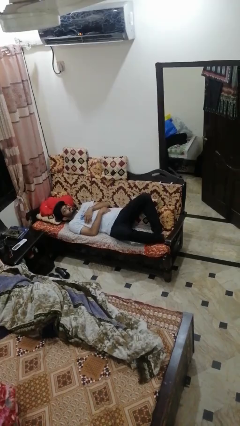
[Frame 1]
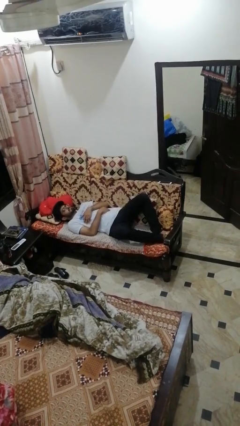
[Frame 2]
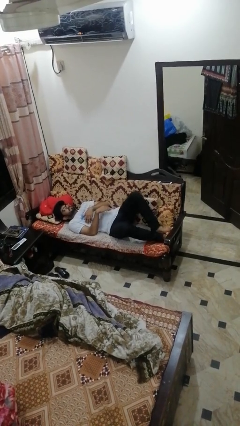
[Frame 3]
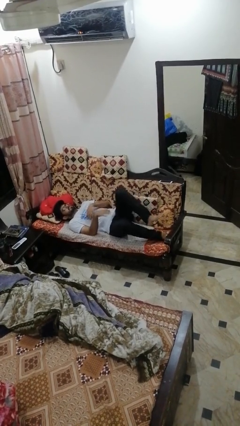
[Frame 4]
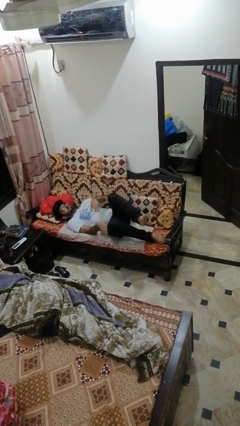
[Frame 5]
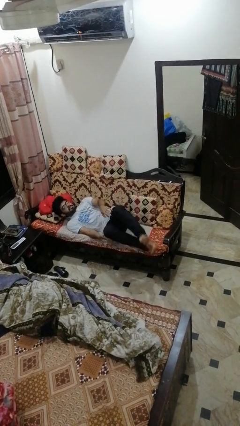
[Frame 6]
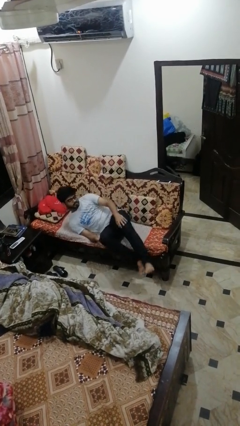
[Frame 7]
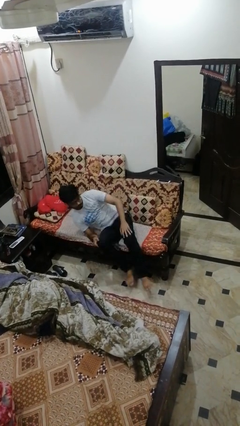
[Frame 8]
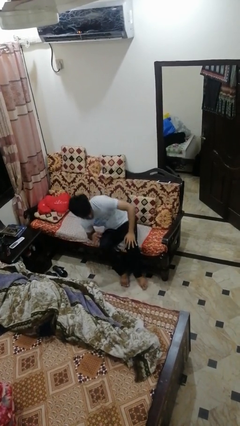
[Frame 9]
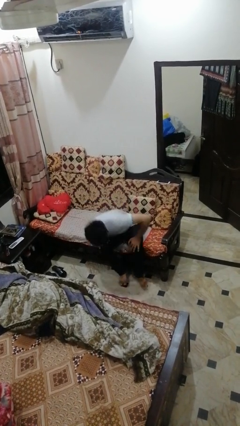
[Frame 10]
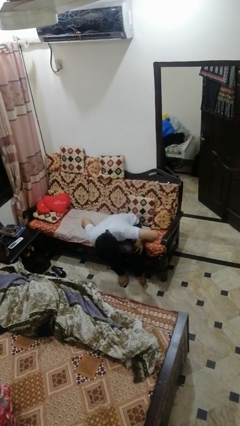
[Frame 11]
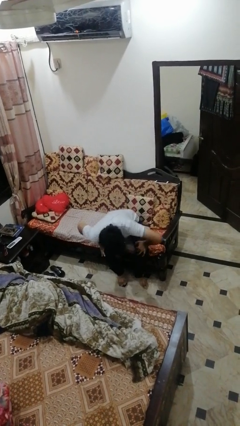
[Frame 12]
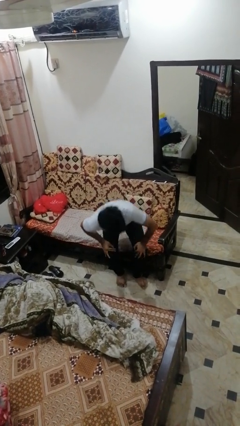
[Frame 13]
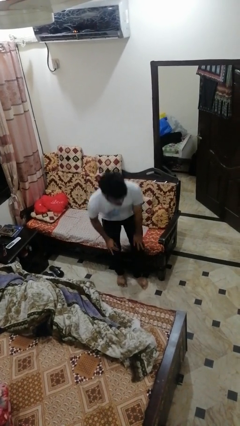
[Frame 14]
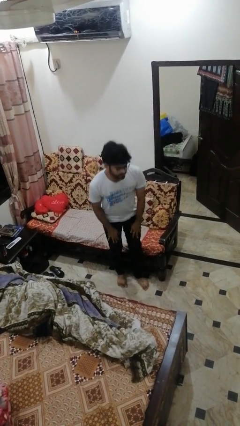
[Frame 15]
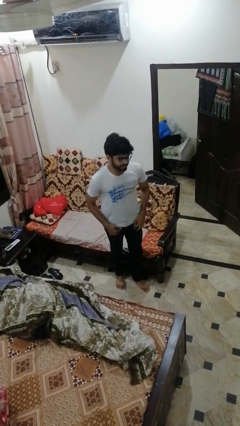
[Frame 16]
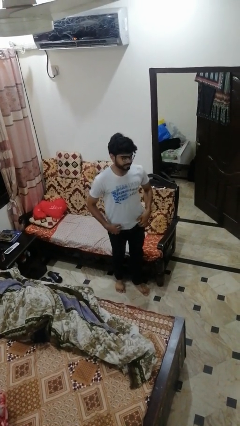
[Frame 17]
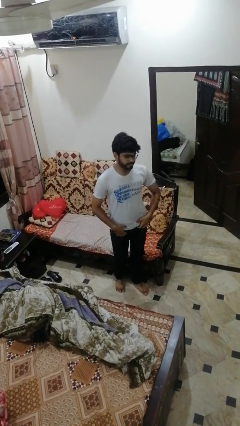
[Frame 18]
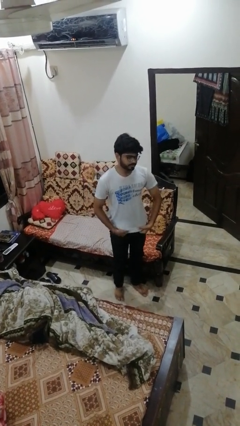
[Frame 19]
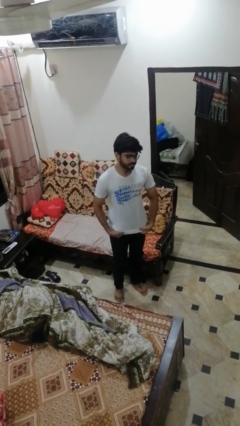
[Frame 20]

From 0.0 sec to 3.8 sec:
person stands up

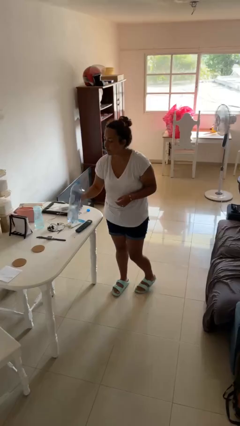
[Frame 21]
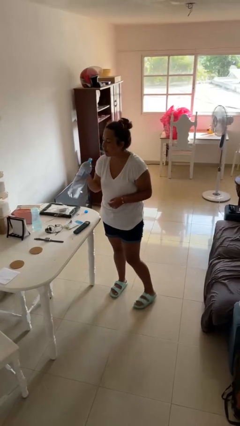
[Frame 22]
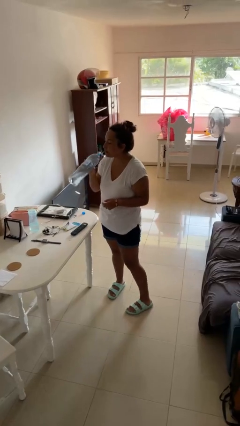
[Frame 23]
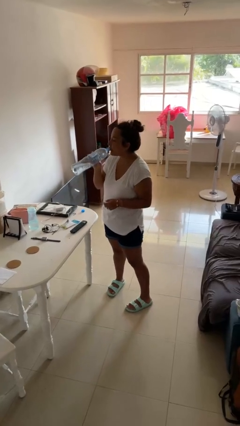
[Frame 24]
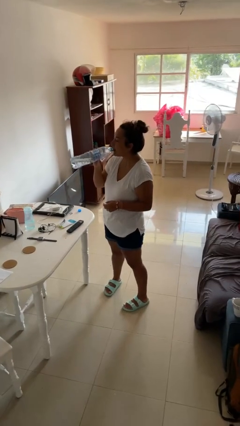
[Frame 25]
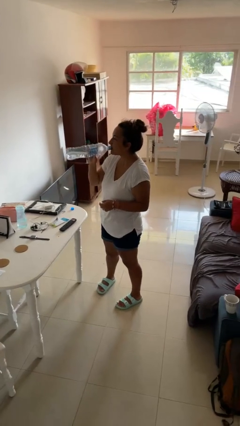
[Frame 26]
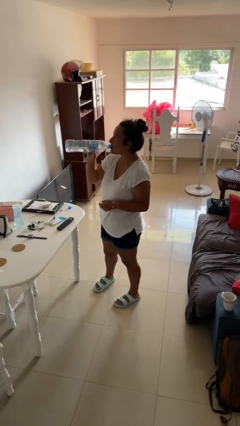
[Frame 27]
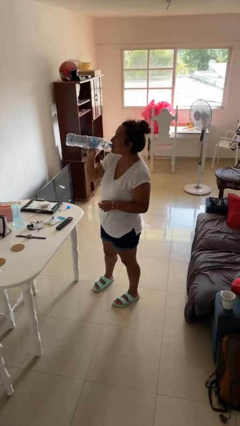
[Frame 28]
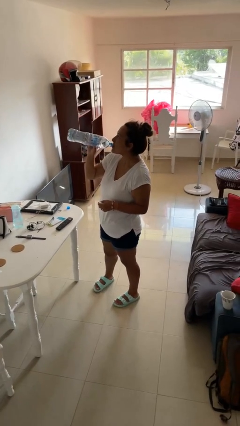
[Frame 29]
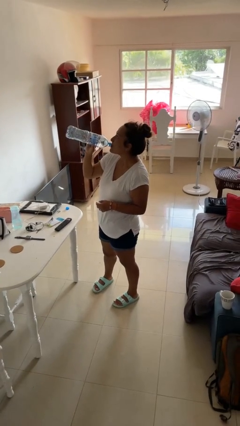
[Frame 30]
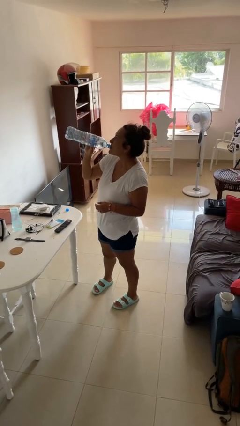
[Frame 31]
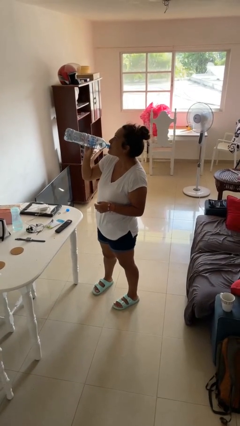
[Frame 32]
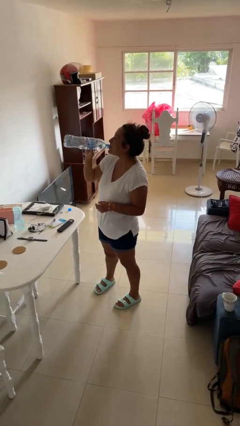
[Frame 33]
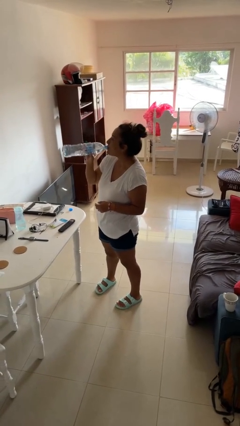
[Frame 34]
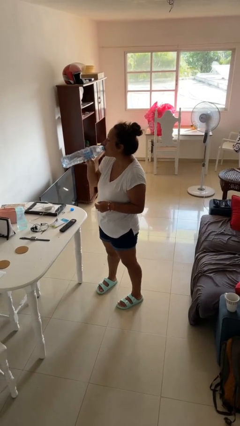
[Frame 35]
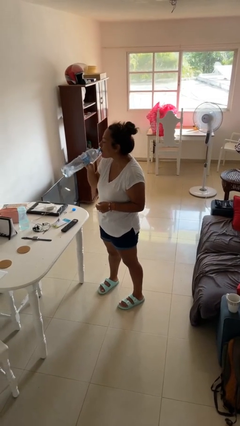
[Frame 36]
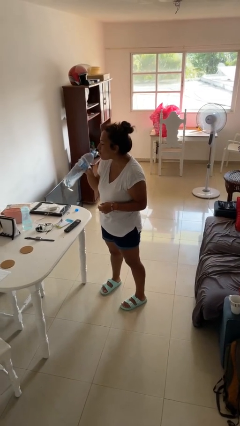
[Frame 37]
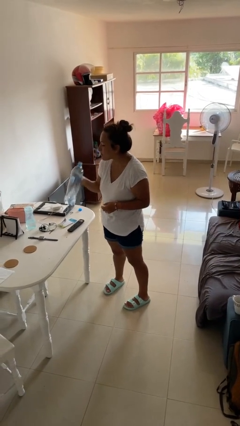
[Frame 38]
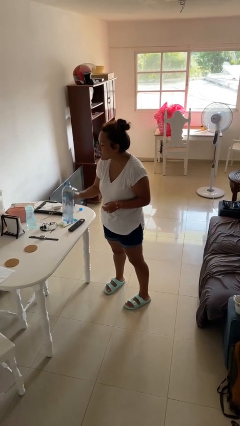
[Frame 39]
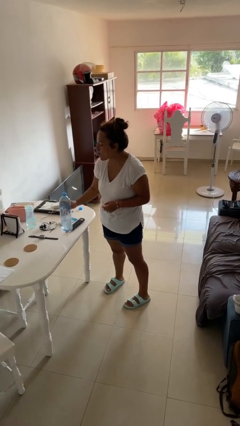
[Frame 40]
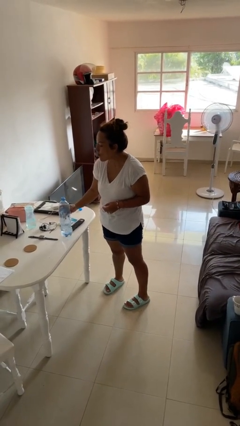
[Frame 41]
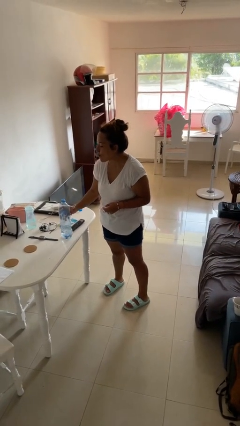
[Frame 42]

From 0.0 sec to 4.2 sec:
person drinks from bottle

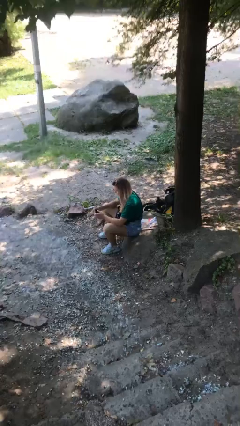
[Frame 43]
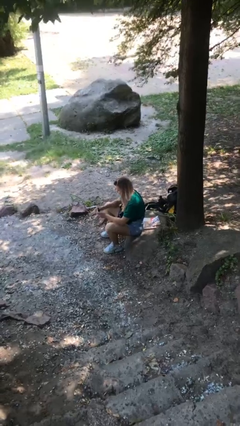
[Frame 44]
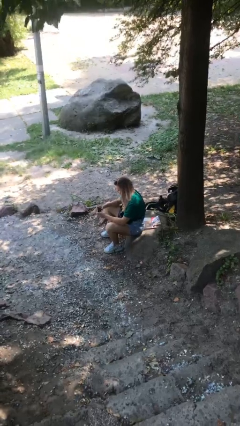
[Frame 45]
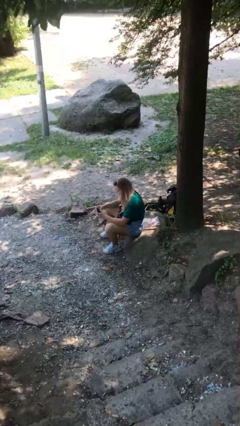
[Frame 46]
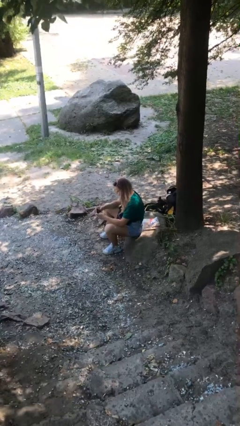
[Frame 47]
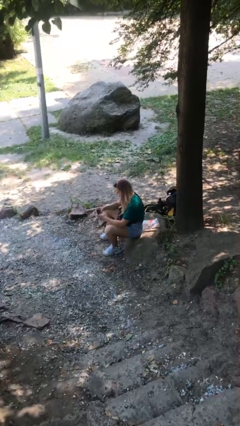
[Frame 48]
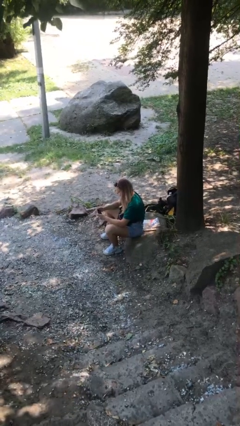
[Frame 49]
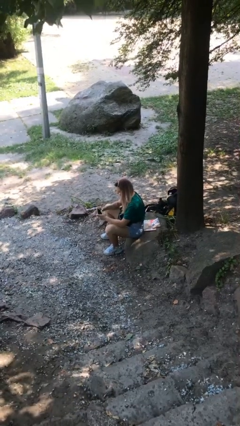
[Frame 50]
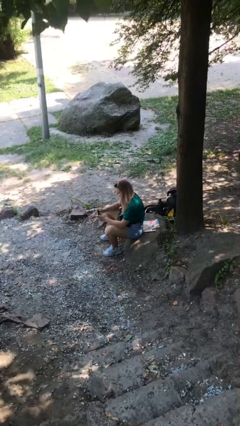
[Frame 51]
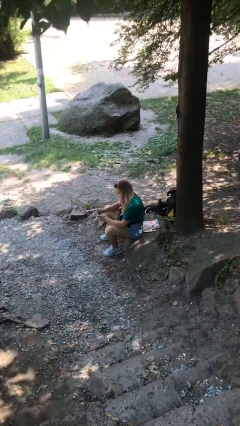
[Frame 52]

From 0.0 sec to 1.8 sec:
person interacts with handheld game

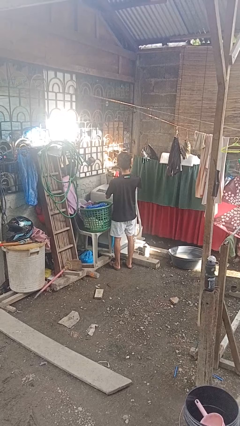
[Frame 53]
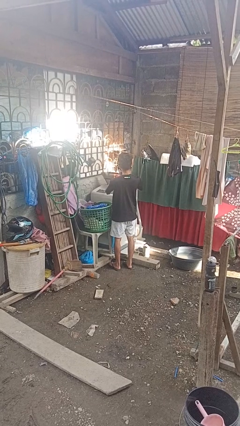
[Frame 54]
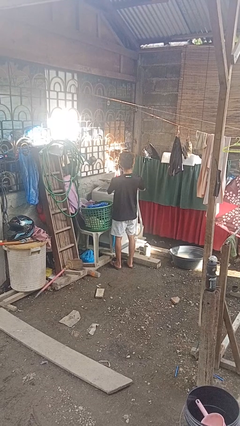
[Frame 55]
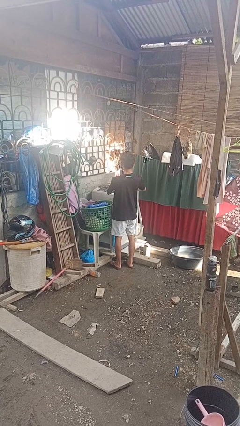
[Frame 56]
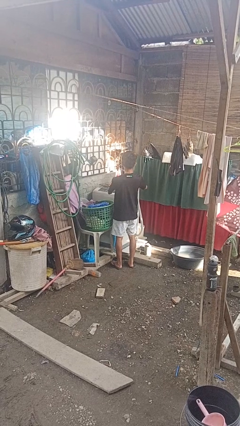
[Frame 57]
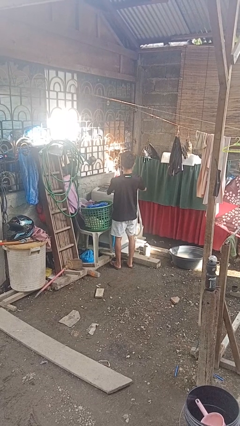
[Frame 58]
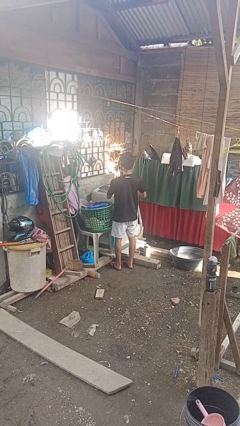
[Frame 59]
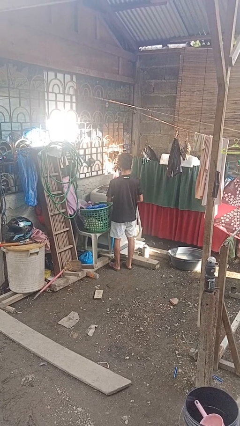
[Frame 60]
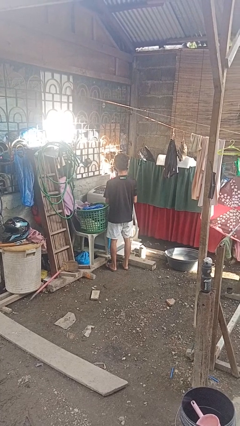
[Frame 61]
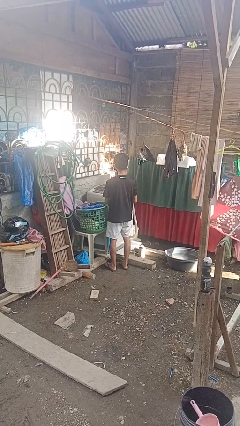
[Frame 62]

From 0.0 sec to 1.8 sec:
person closes clothes washer

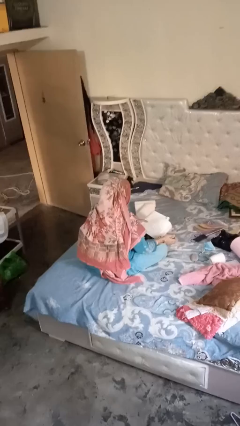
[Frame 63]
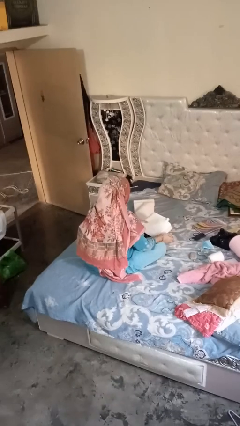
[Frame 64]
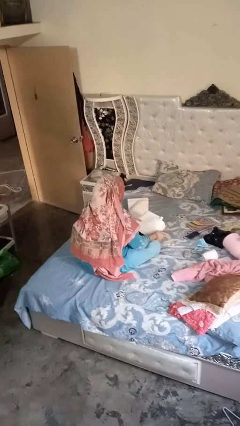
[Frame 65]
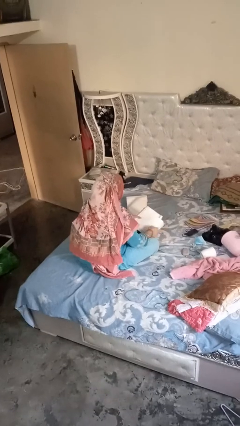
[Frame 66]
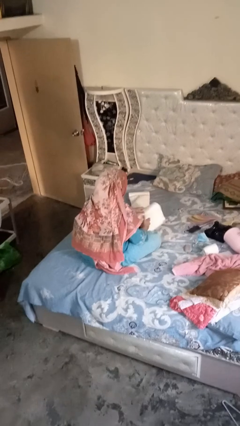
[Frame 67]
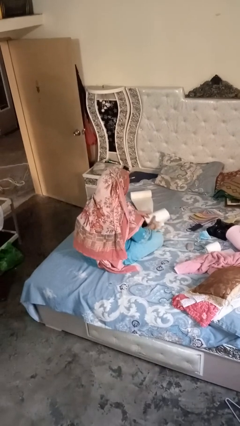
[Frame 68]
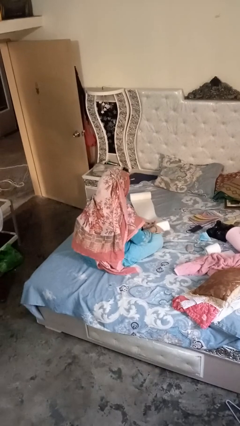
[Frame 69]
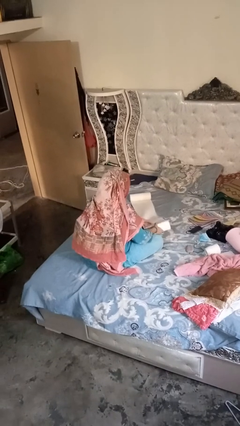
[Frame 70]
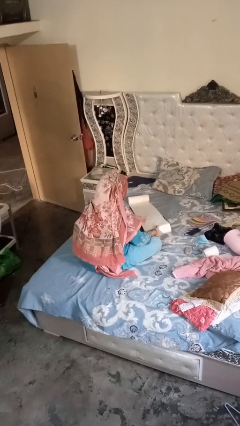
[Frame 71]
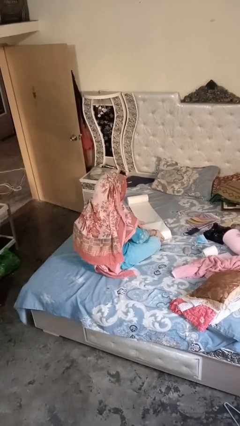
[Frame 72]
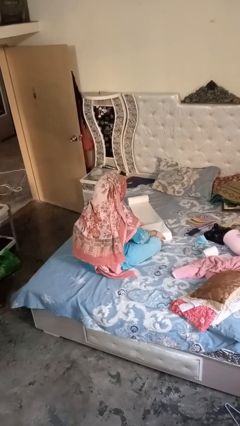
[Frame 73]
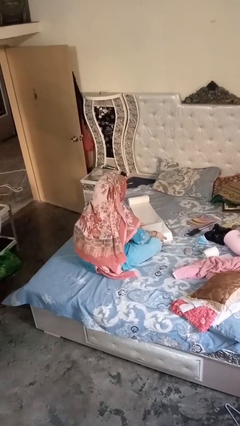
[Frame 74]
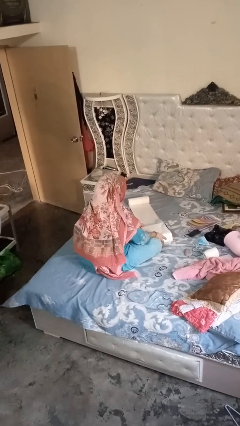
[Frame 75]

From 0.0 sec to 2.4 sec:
person wraps box

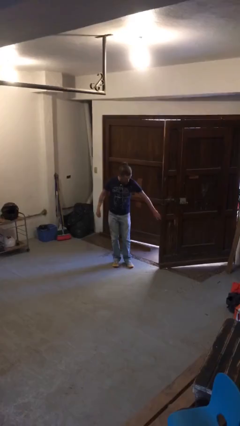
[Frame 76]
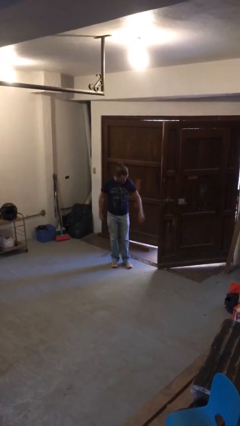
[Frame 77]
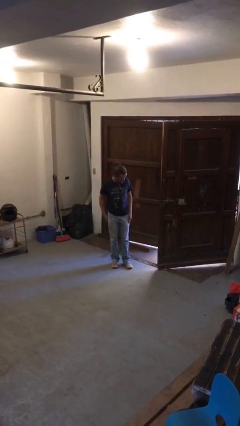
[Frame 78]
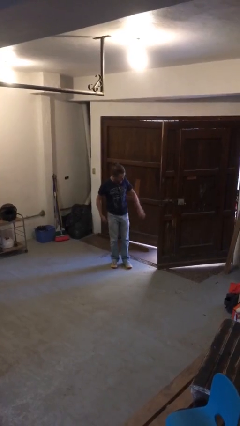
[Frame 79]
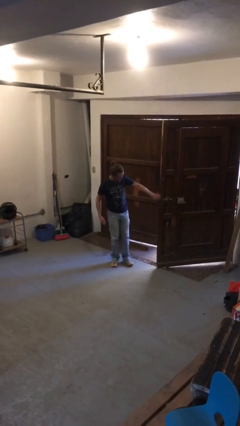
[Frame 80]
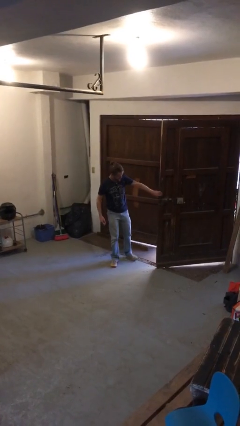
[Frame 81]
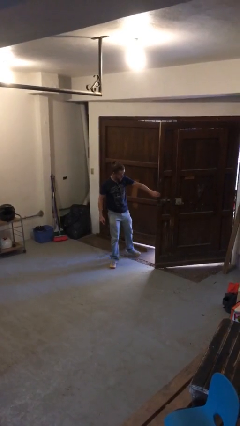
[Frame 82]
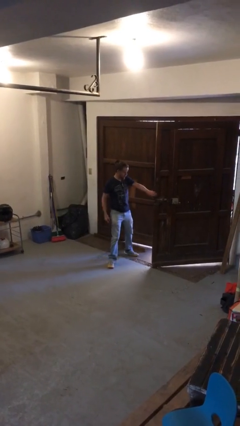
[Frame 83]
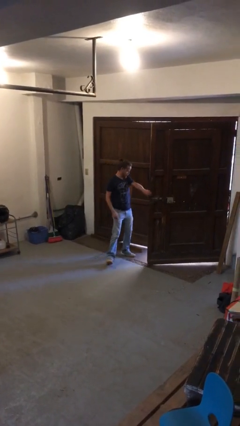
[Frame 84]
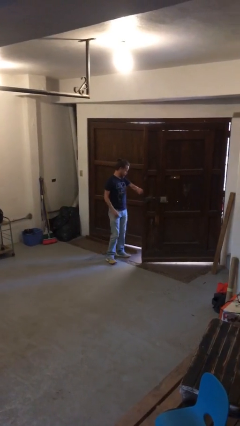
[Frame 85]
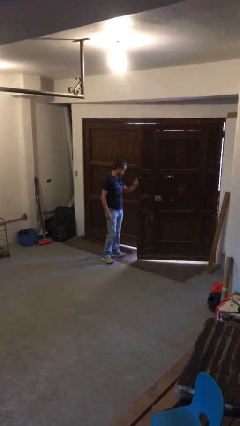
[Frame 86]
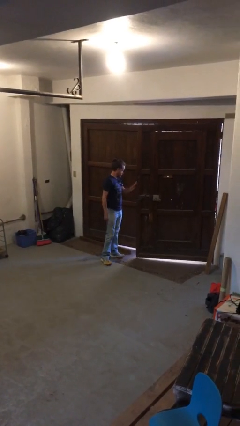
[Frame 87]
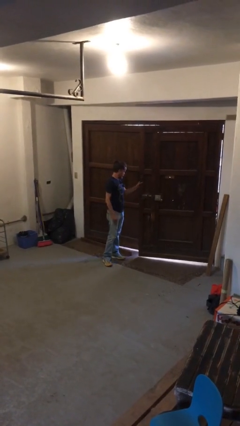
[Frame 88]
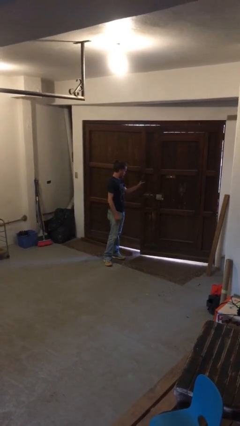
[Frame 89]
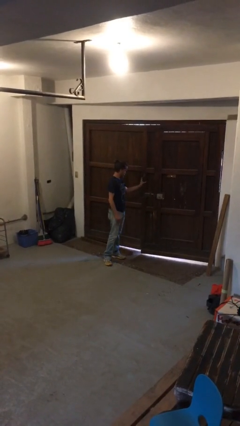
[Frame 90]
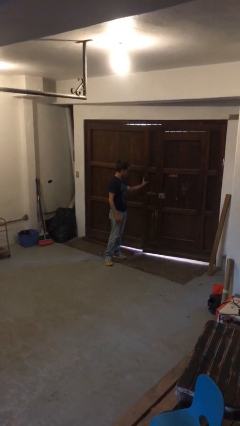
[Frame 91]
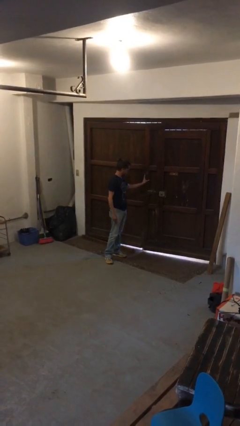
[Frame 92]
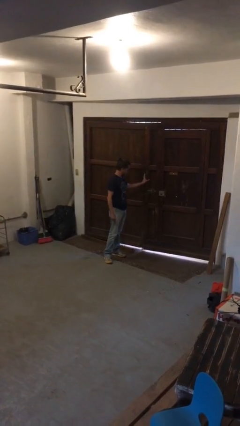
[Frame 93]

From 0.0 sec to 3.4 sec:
person closes gate
